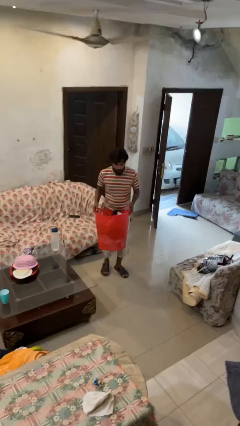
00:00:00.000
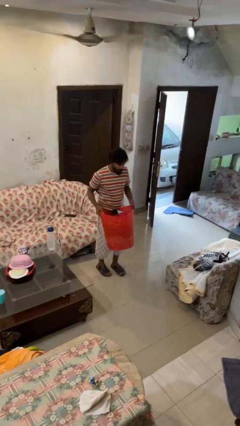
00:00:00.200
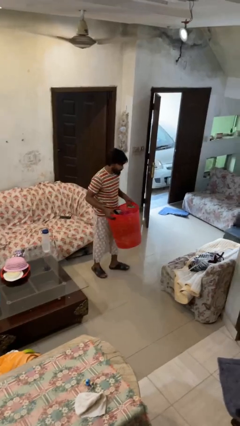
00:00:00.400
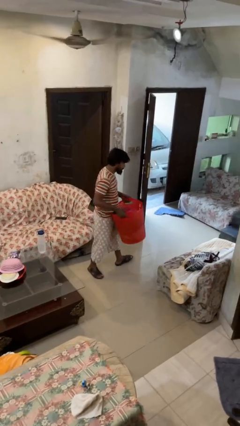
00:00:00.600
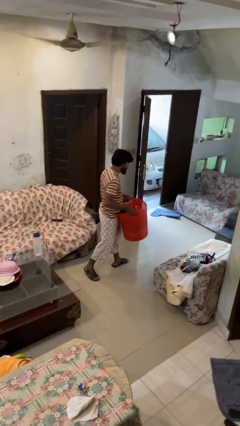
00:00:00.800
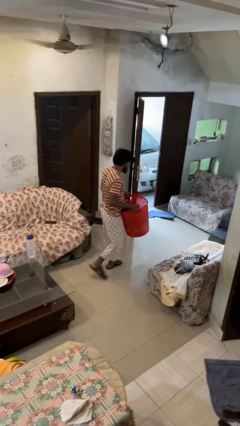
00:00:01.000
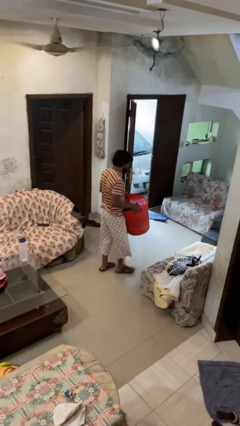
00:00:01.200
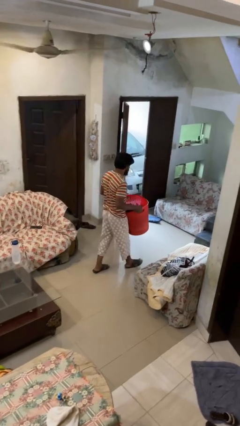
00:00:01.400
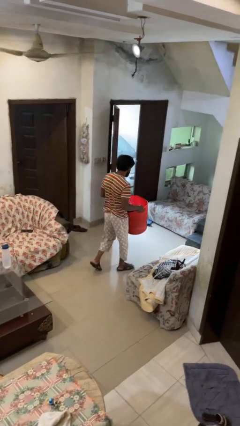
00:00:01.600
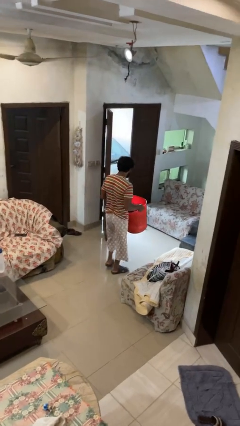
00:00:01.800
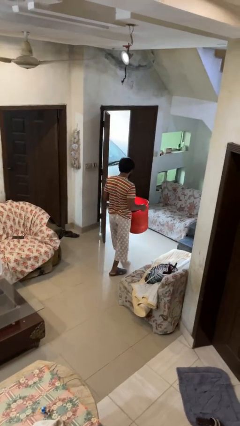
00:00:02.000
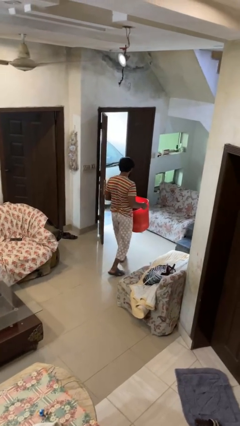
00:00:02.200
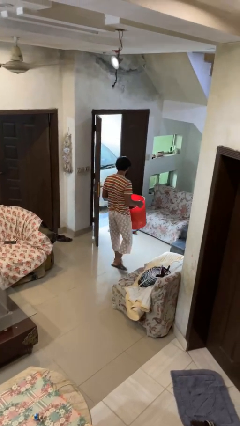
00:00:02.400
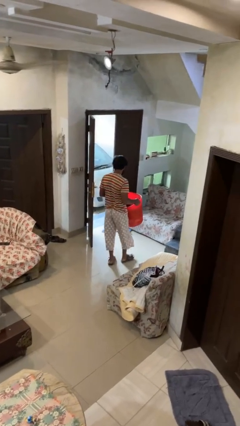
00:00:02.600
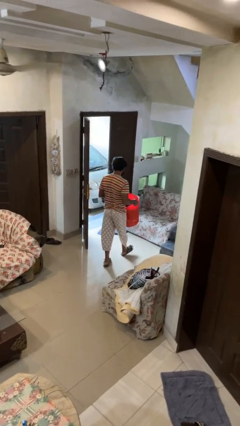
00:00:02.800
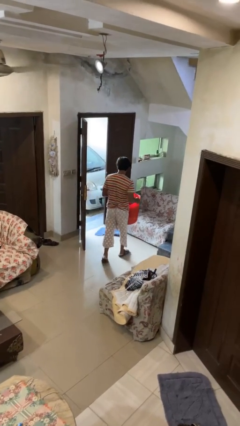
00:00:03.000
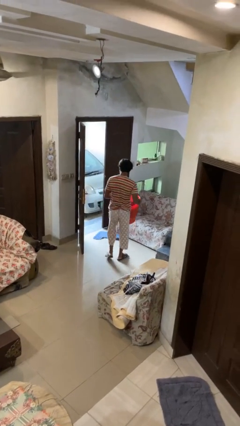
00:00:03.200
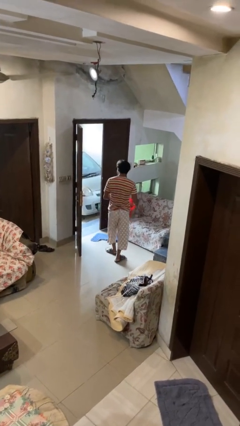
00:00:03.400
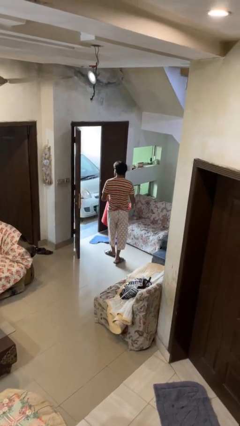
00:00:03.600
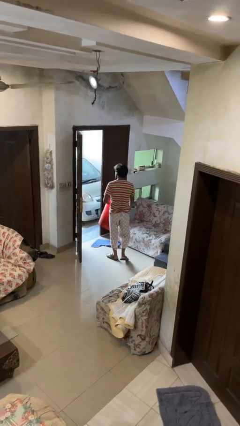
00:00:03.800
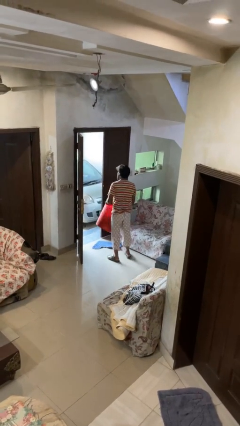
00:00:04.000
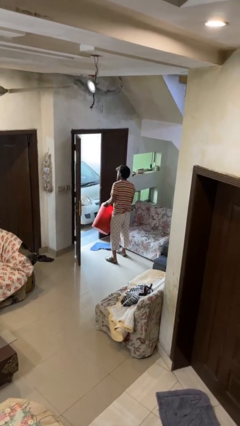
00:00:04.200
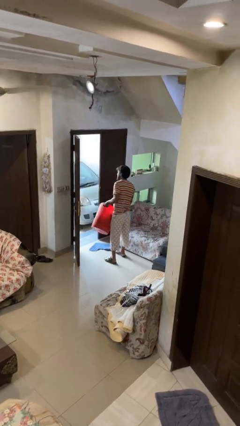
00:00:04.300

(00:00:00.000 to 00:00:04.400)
person carries laundry basket

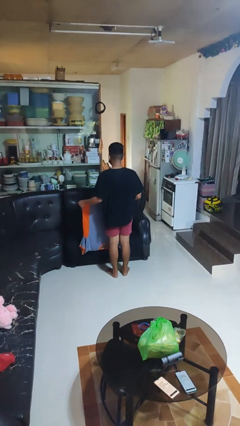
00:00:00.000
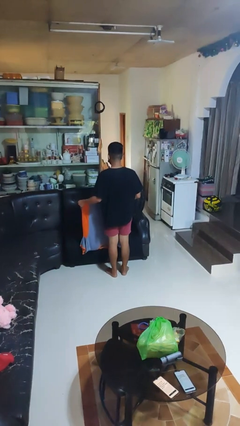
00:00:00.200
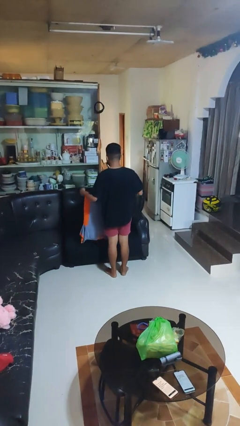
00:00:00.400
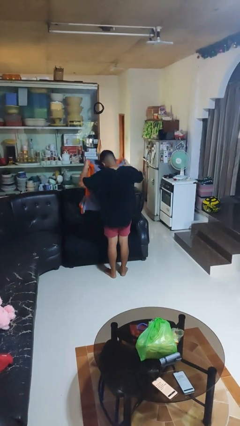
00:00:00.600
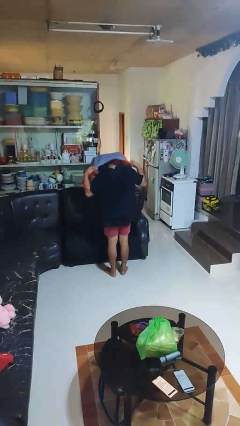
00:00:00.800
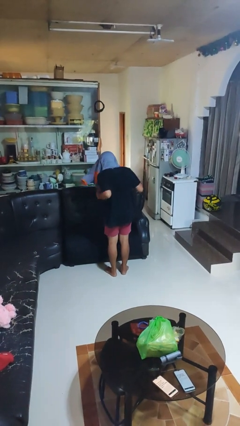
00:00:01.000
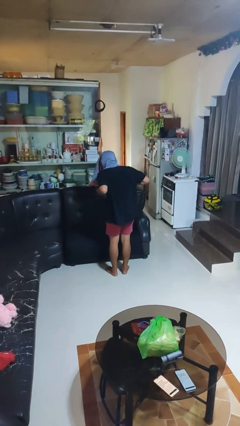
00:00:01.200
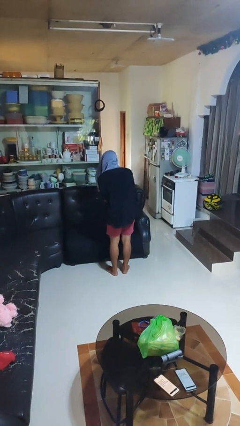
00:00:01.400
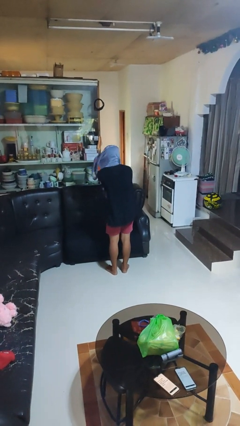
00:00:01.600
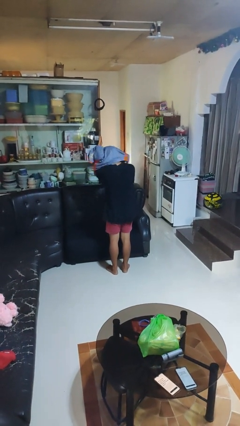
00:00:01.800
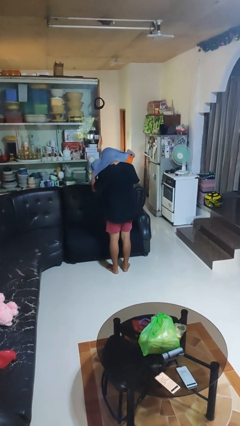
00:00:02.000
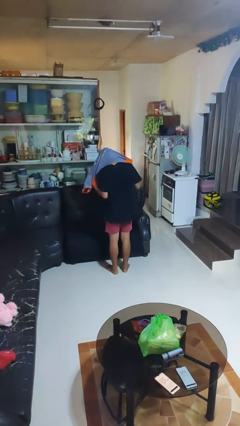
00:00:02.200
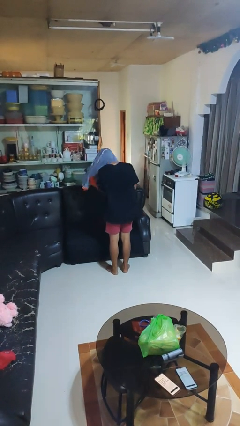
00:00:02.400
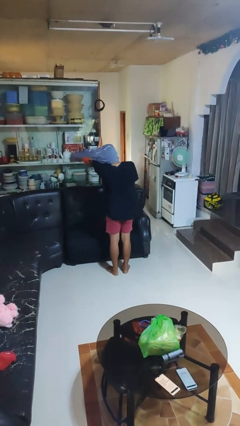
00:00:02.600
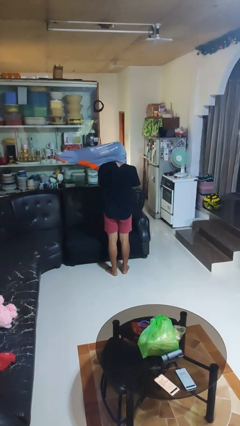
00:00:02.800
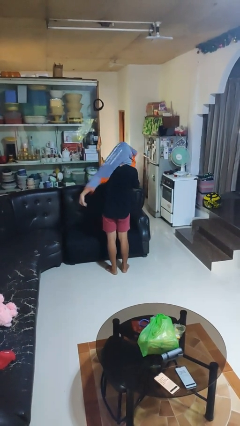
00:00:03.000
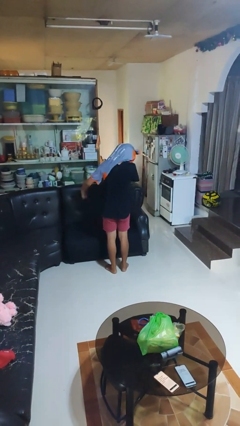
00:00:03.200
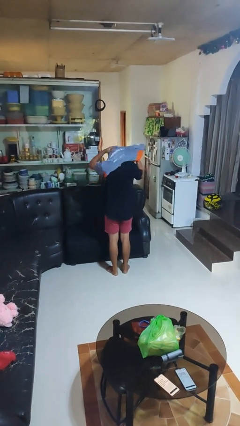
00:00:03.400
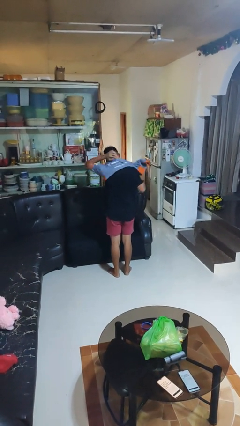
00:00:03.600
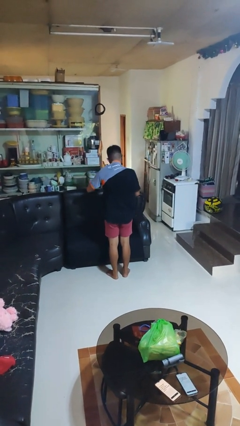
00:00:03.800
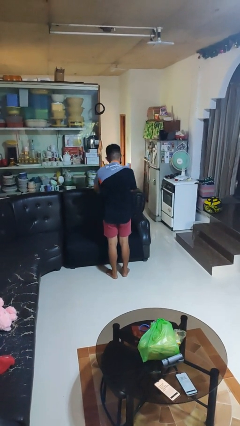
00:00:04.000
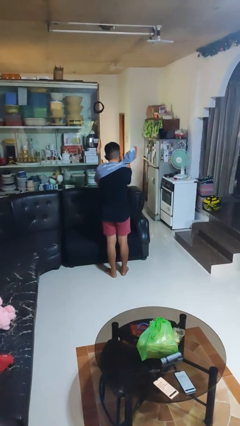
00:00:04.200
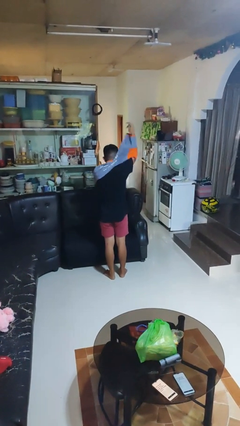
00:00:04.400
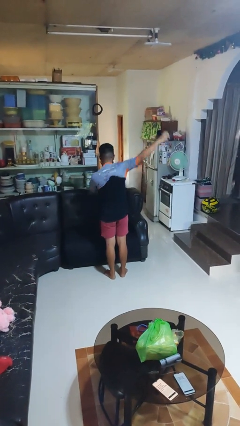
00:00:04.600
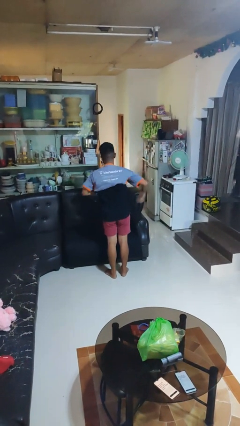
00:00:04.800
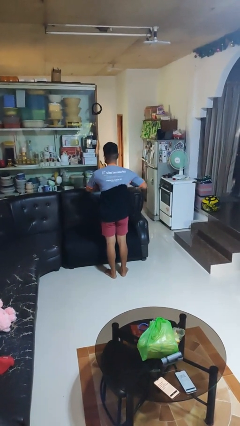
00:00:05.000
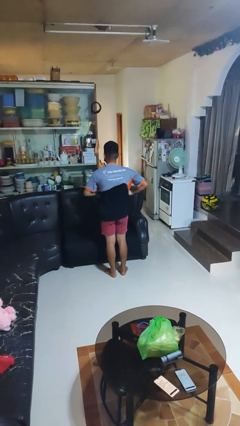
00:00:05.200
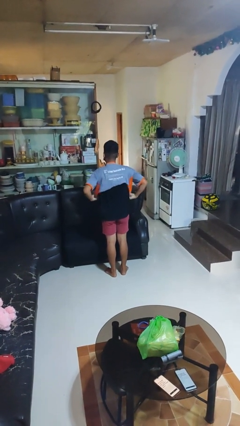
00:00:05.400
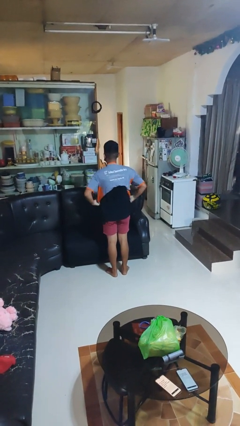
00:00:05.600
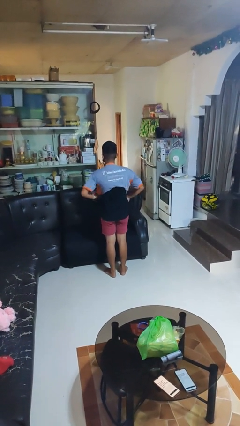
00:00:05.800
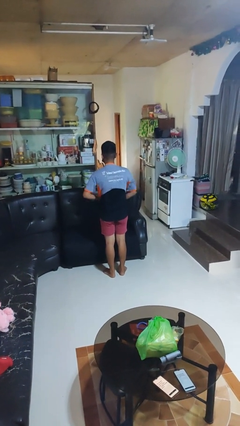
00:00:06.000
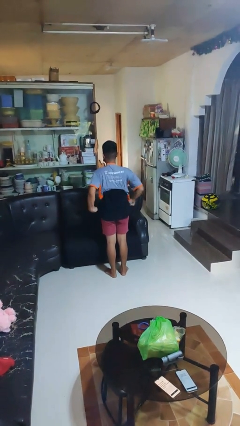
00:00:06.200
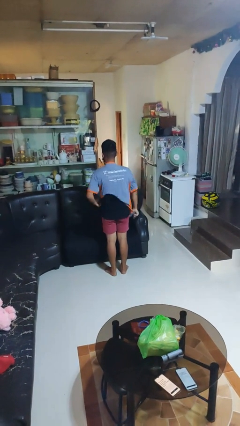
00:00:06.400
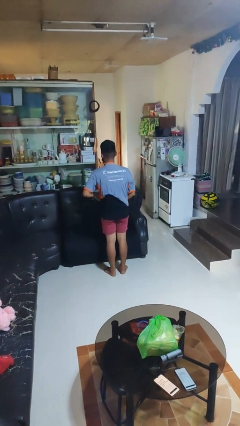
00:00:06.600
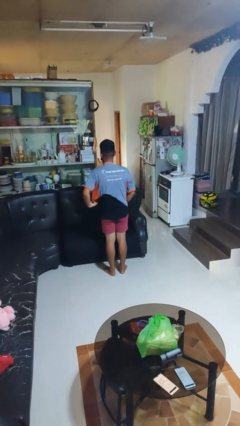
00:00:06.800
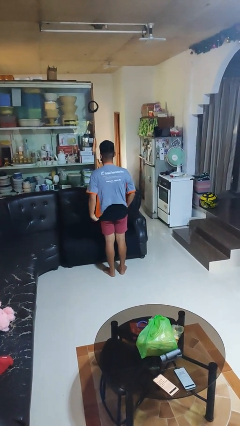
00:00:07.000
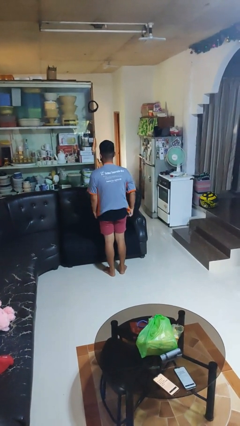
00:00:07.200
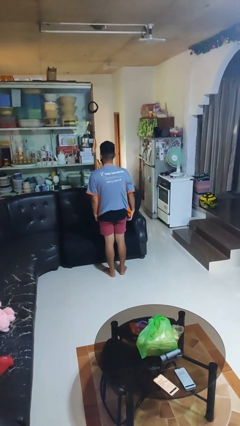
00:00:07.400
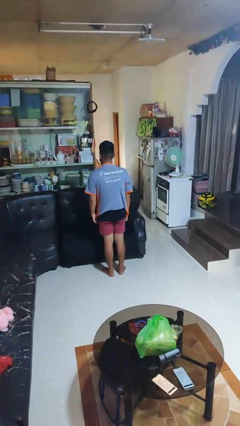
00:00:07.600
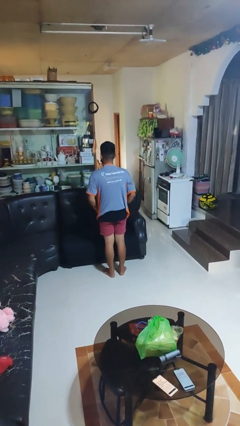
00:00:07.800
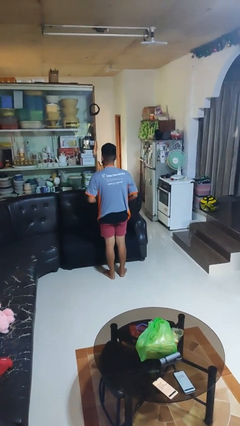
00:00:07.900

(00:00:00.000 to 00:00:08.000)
person puts on shirt

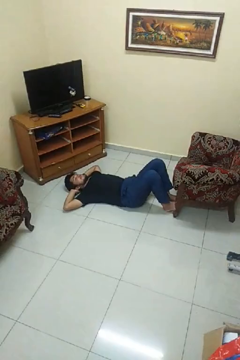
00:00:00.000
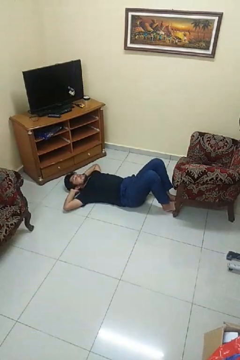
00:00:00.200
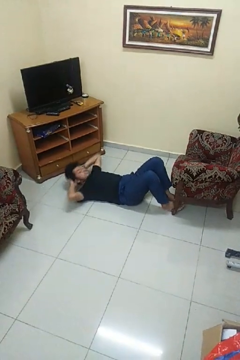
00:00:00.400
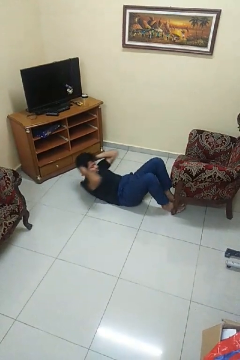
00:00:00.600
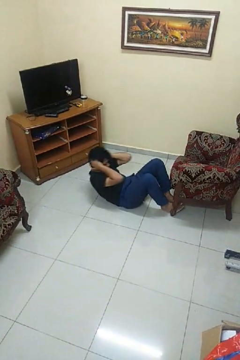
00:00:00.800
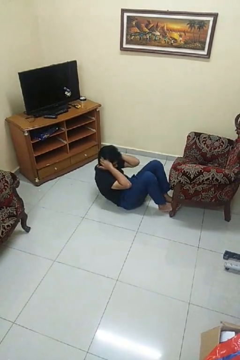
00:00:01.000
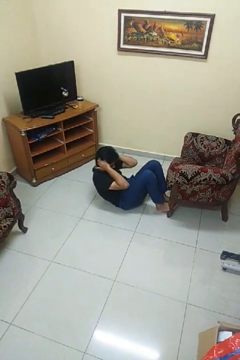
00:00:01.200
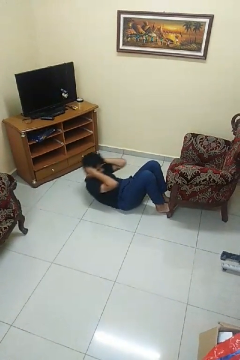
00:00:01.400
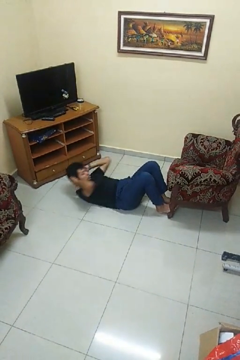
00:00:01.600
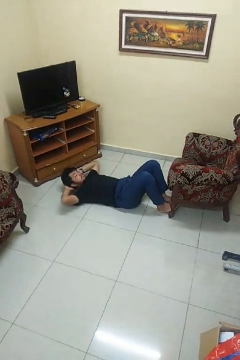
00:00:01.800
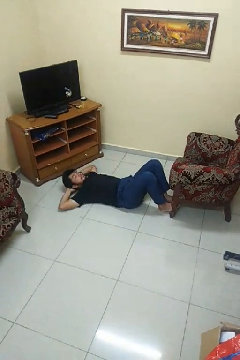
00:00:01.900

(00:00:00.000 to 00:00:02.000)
person exercises with situp

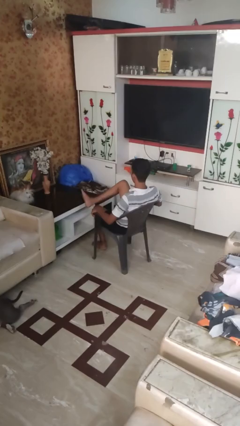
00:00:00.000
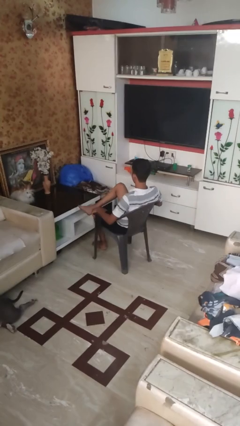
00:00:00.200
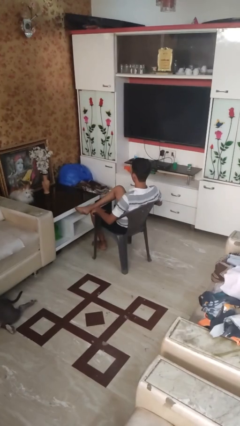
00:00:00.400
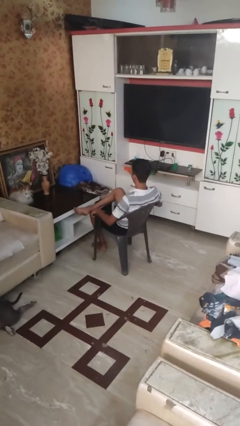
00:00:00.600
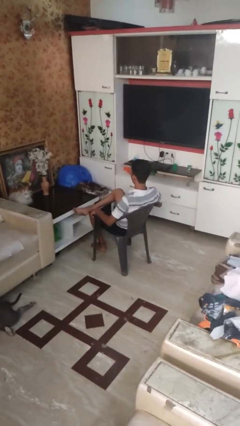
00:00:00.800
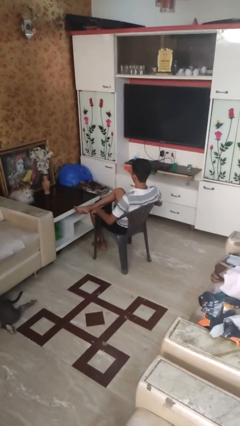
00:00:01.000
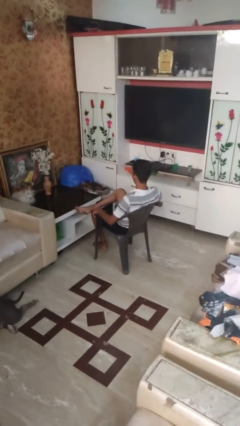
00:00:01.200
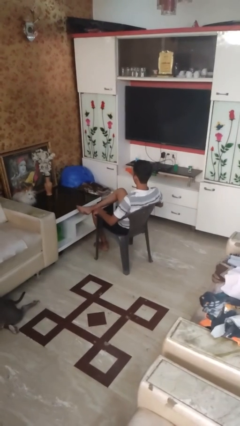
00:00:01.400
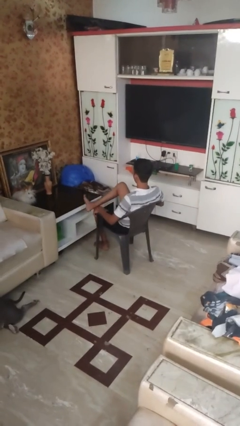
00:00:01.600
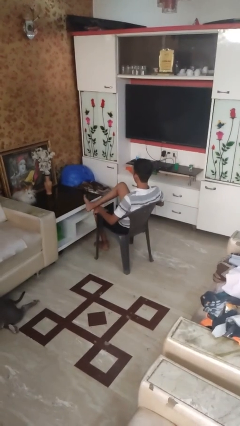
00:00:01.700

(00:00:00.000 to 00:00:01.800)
person crosses legs

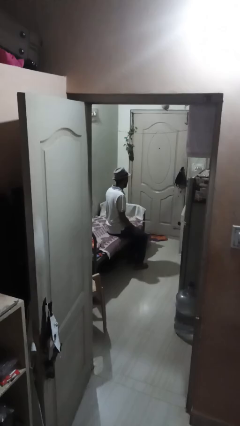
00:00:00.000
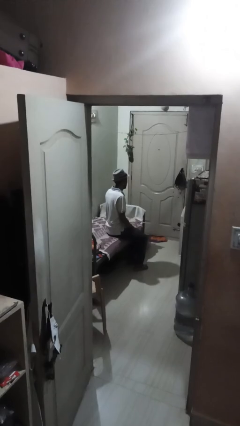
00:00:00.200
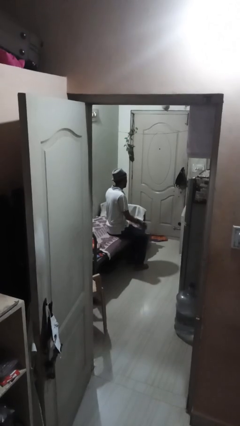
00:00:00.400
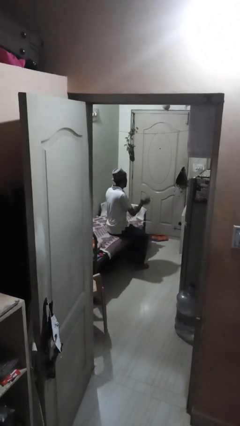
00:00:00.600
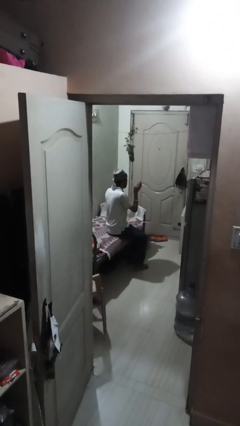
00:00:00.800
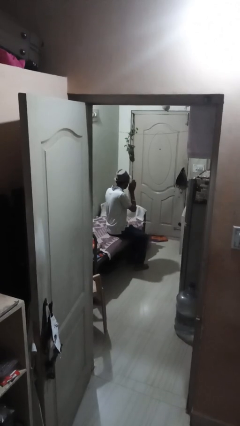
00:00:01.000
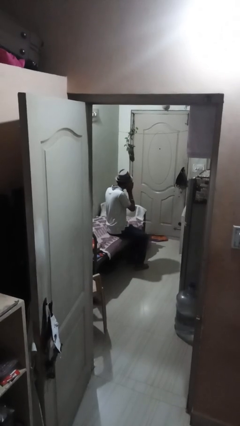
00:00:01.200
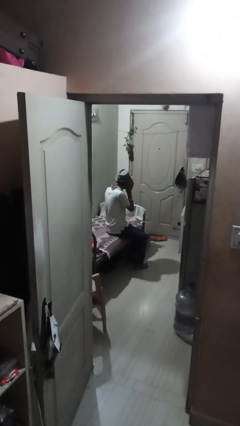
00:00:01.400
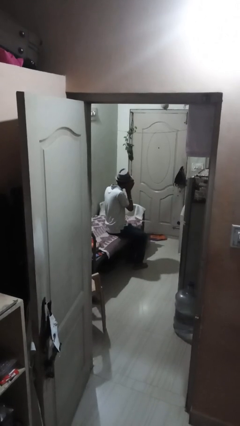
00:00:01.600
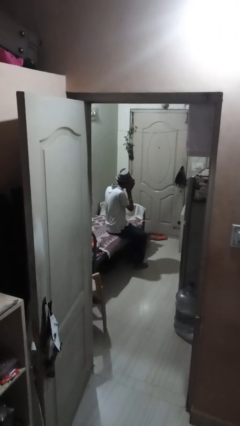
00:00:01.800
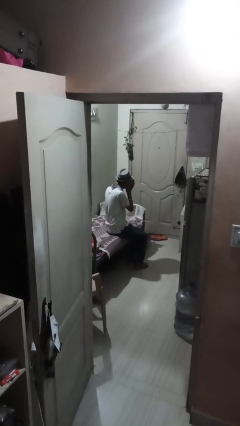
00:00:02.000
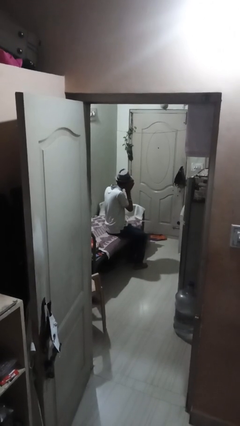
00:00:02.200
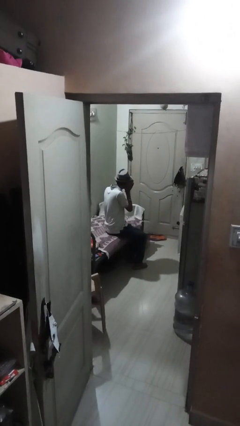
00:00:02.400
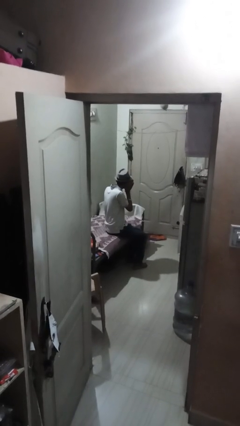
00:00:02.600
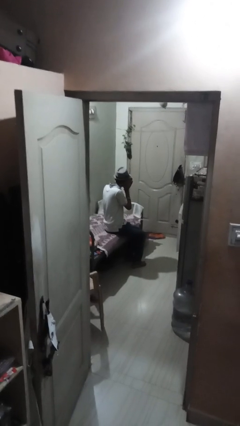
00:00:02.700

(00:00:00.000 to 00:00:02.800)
person gestures listen closely
